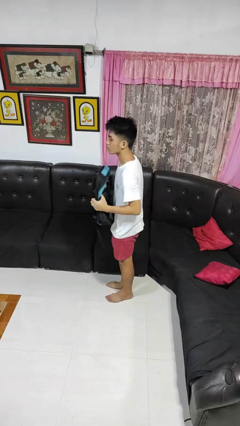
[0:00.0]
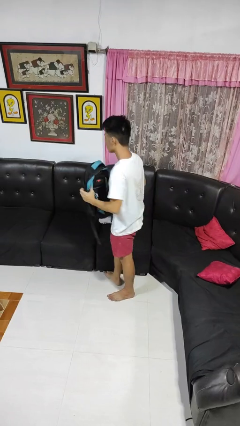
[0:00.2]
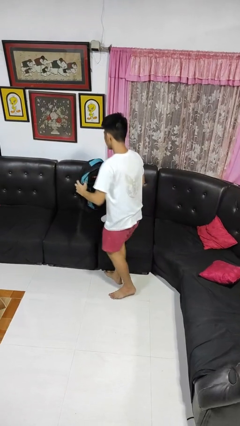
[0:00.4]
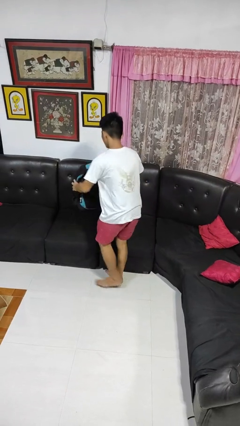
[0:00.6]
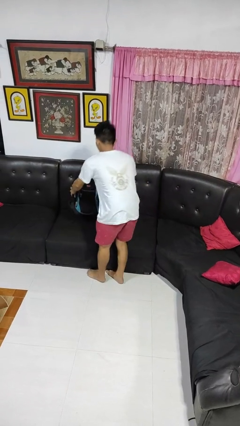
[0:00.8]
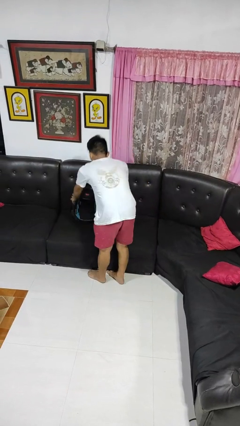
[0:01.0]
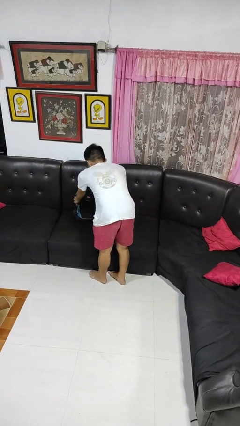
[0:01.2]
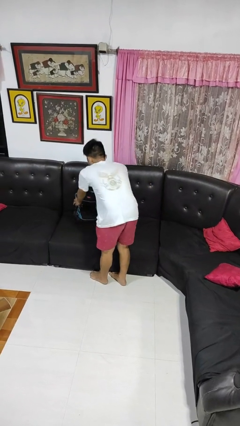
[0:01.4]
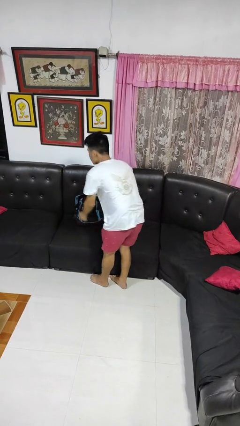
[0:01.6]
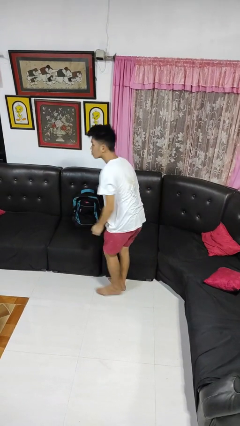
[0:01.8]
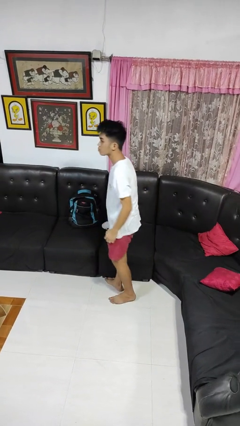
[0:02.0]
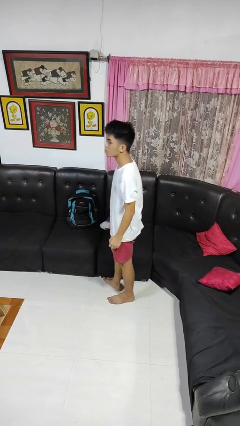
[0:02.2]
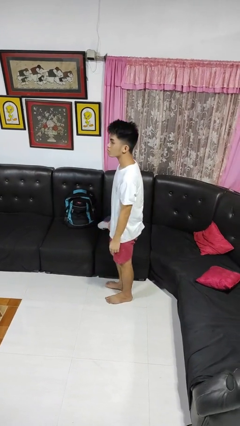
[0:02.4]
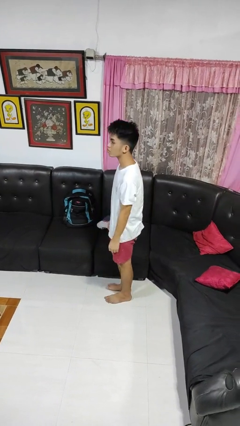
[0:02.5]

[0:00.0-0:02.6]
person puts down object on couch

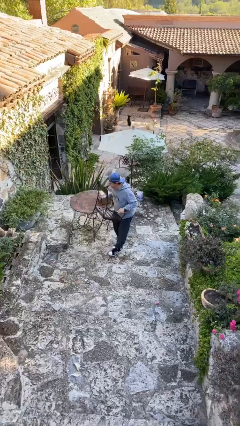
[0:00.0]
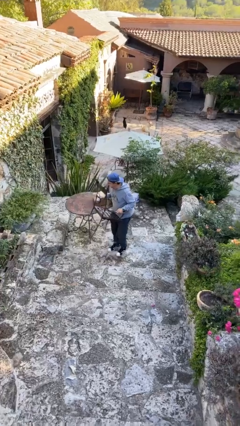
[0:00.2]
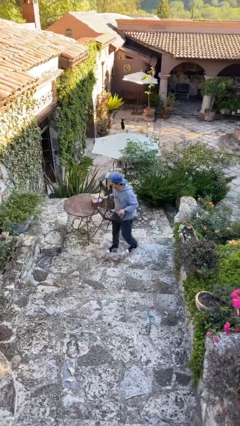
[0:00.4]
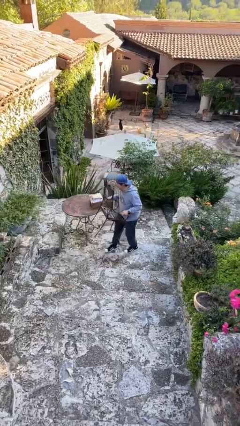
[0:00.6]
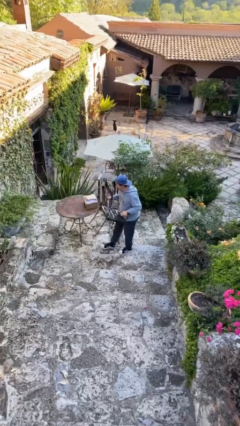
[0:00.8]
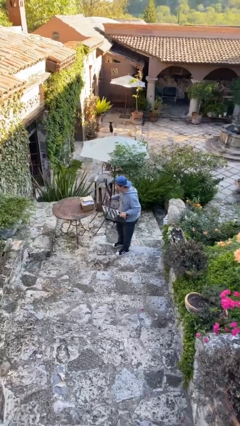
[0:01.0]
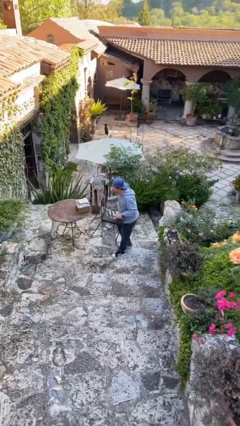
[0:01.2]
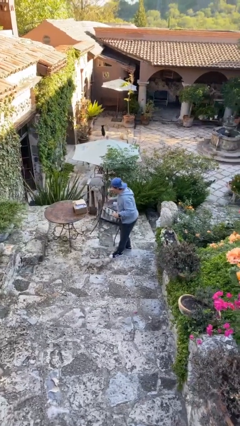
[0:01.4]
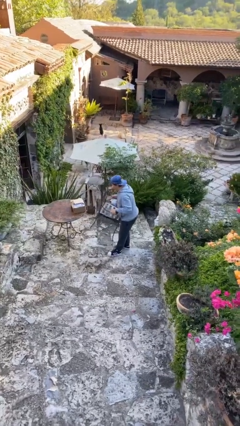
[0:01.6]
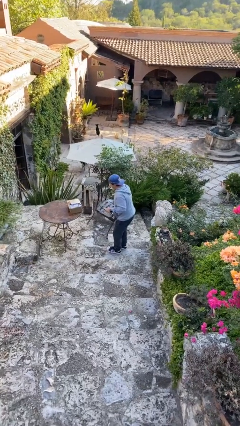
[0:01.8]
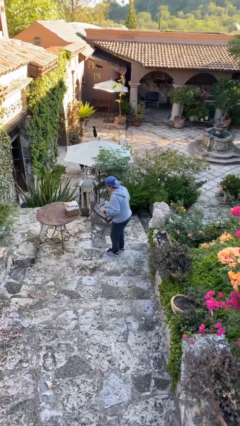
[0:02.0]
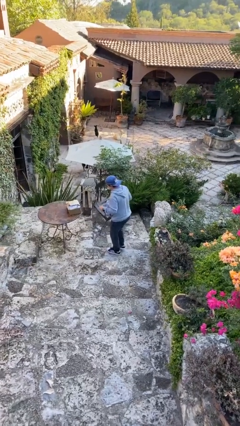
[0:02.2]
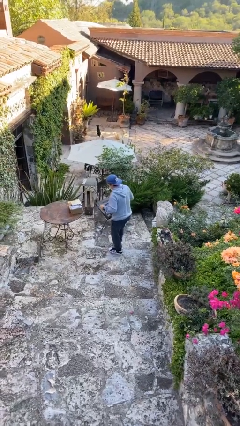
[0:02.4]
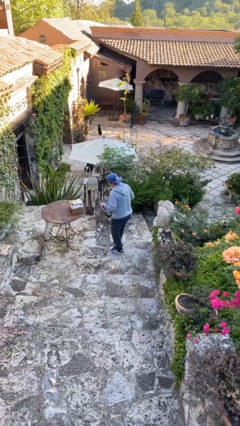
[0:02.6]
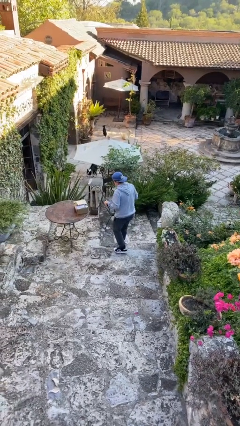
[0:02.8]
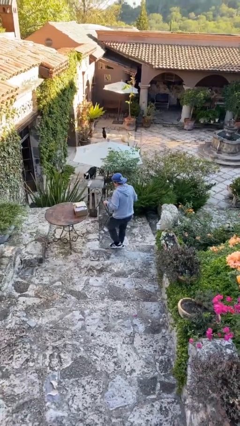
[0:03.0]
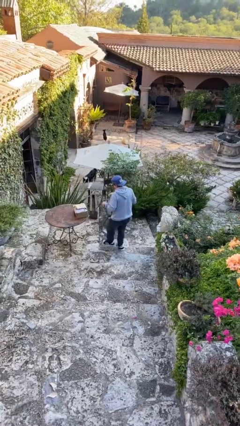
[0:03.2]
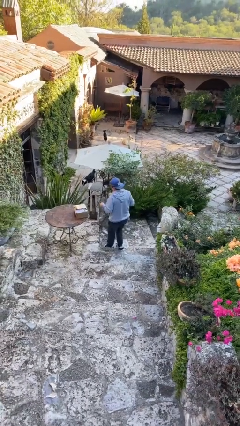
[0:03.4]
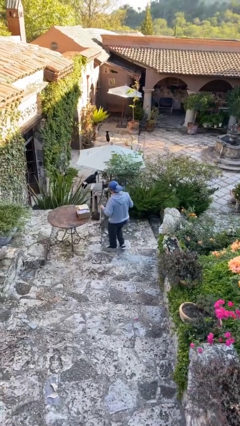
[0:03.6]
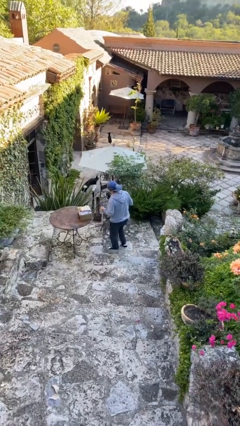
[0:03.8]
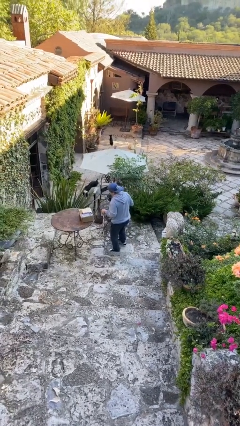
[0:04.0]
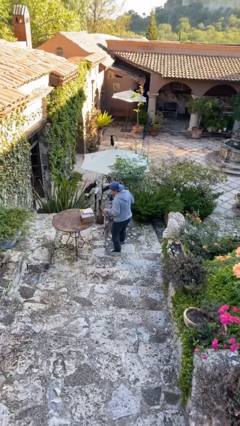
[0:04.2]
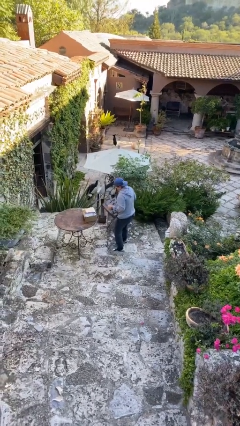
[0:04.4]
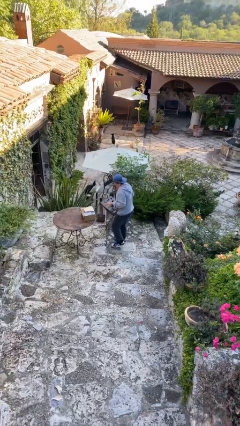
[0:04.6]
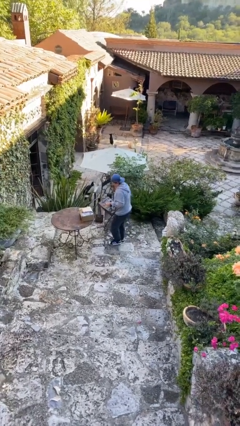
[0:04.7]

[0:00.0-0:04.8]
person carries heavy object

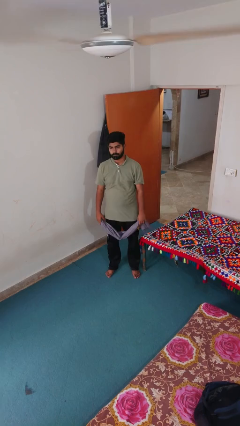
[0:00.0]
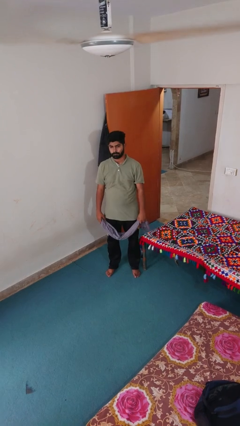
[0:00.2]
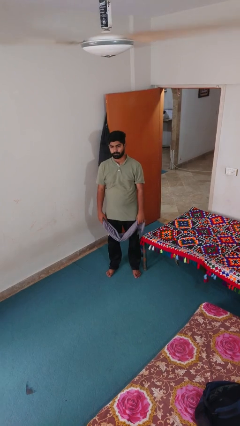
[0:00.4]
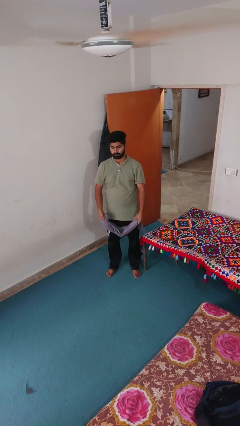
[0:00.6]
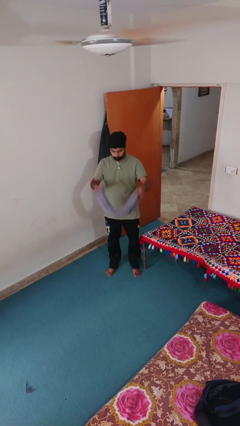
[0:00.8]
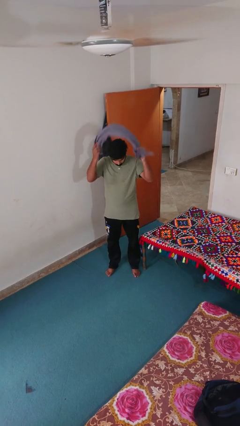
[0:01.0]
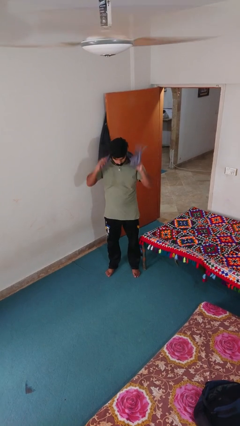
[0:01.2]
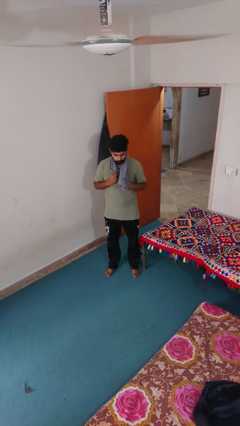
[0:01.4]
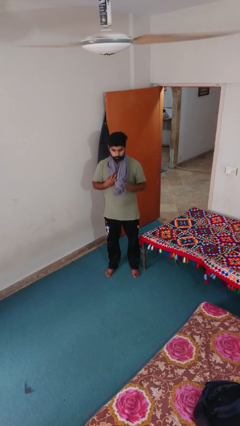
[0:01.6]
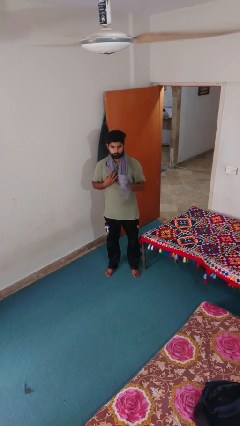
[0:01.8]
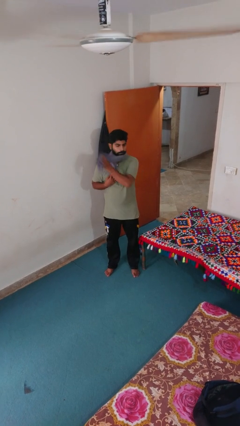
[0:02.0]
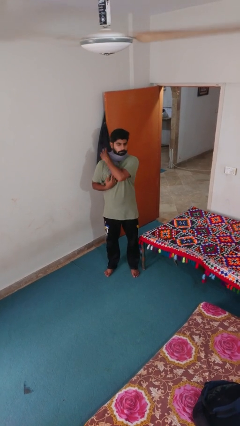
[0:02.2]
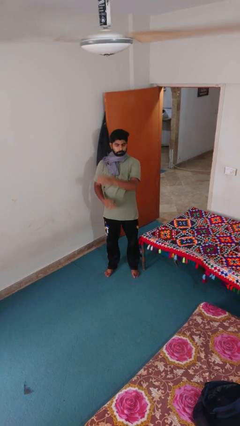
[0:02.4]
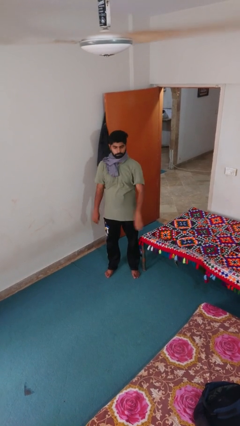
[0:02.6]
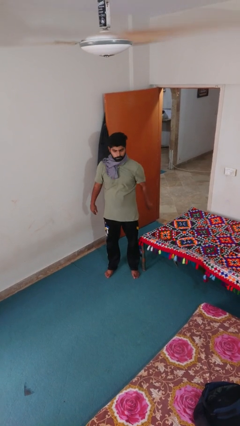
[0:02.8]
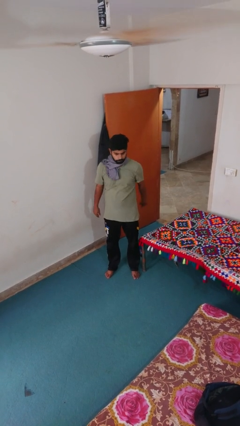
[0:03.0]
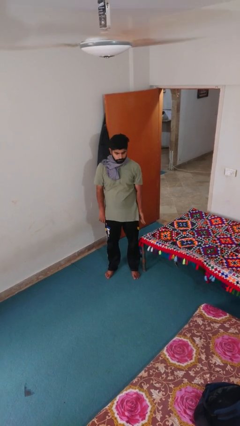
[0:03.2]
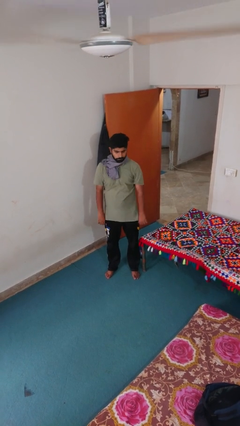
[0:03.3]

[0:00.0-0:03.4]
person puts on scarf

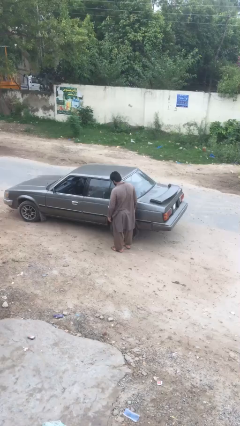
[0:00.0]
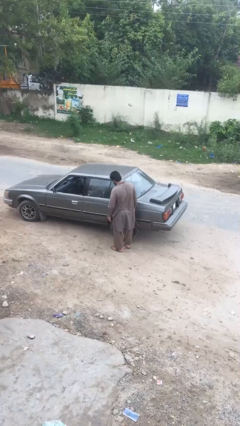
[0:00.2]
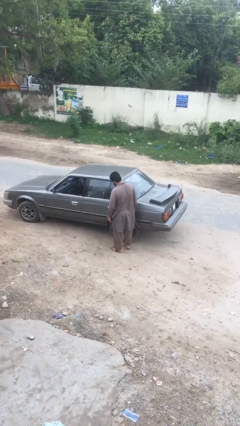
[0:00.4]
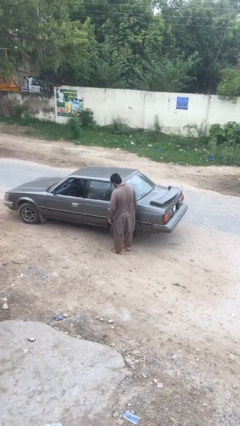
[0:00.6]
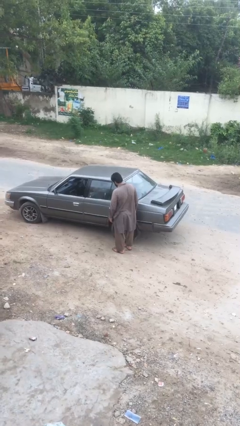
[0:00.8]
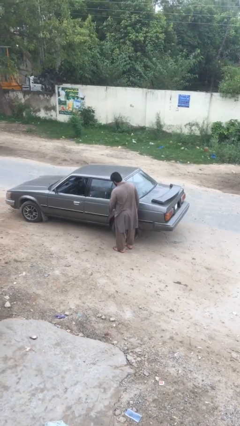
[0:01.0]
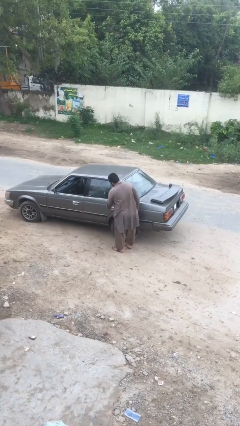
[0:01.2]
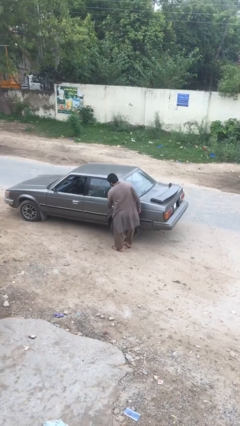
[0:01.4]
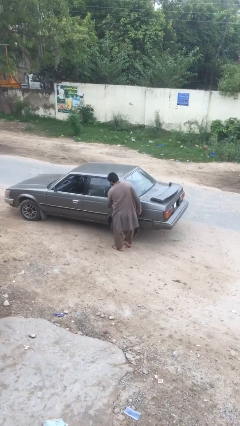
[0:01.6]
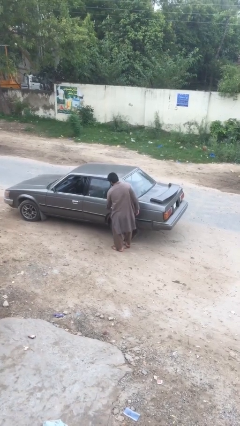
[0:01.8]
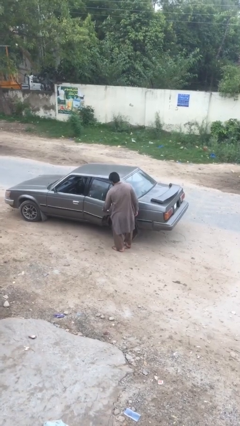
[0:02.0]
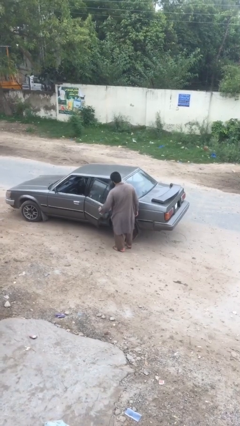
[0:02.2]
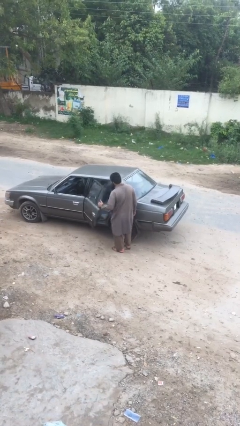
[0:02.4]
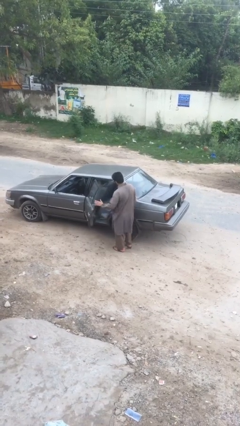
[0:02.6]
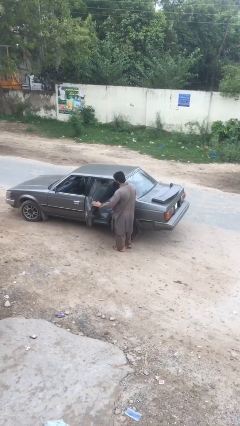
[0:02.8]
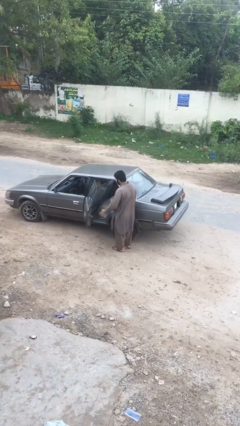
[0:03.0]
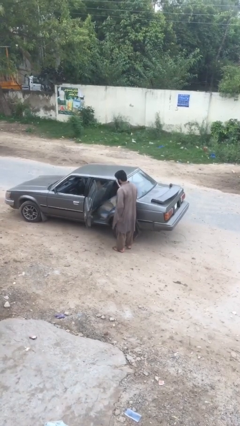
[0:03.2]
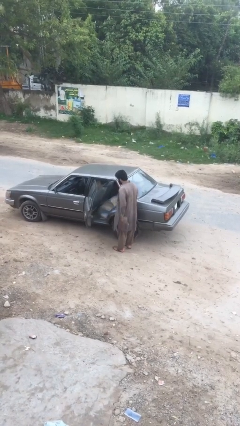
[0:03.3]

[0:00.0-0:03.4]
person opens car door

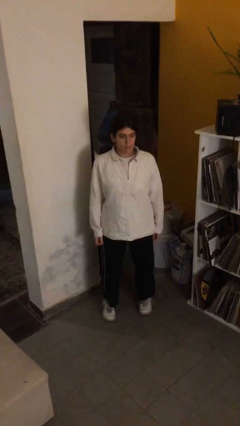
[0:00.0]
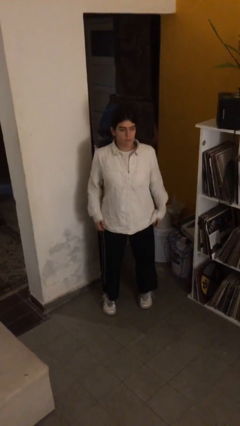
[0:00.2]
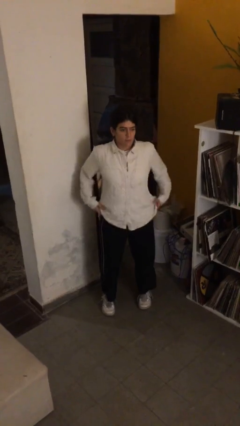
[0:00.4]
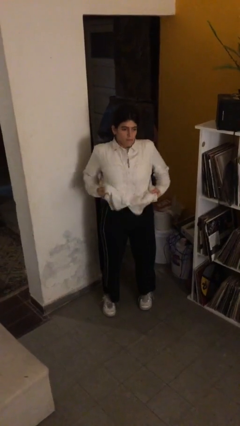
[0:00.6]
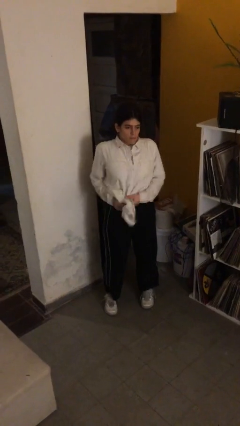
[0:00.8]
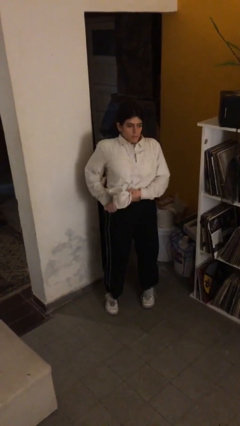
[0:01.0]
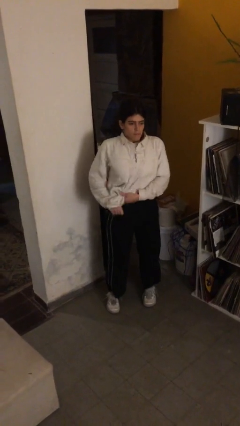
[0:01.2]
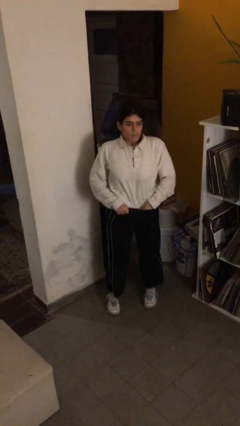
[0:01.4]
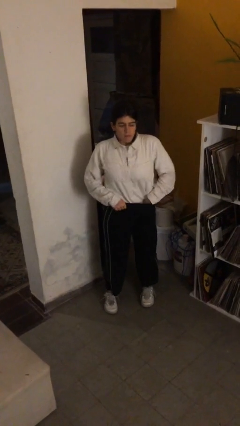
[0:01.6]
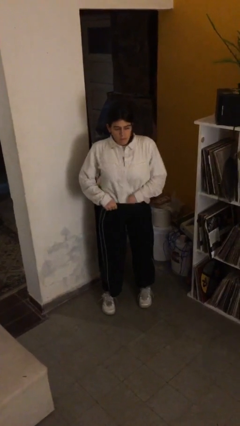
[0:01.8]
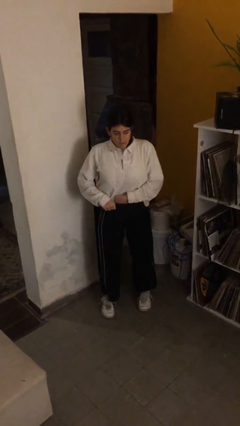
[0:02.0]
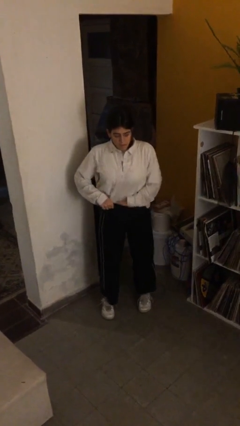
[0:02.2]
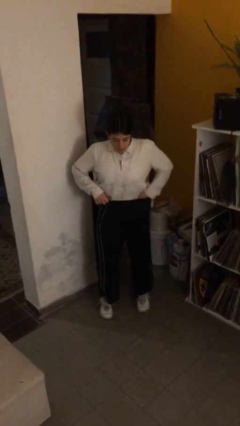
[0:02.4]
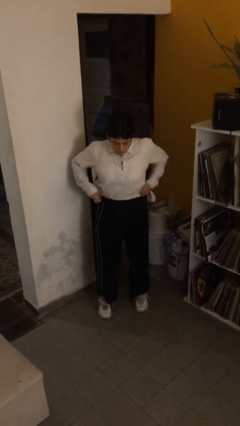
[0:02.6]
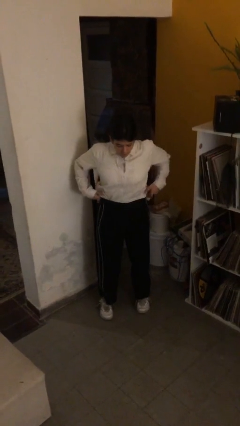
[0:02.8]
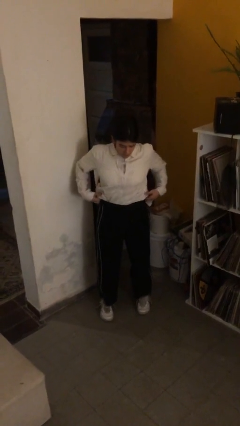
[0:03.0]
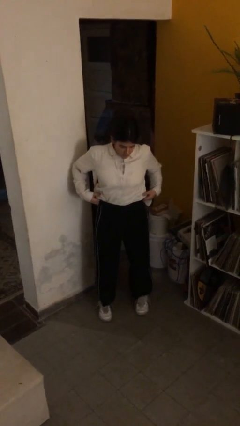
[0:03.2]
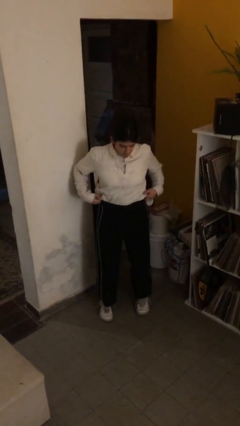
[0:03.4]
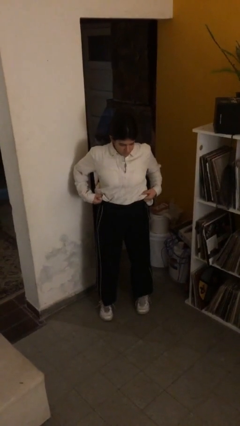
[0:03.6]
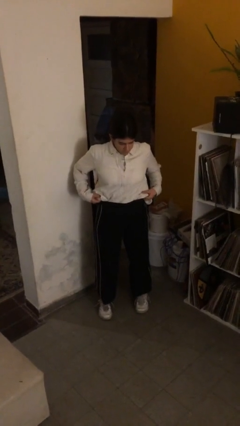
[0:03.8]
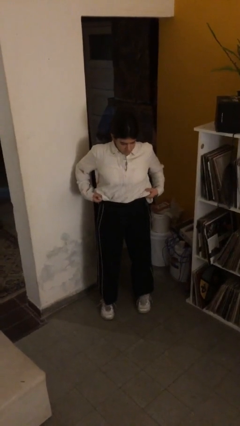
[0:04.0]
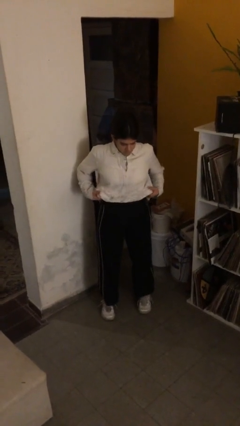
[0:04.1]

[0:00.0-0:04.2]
person tucks in shirt
